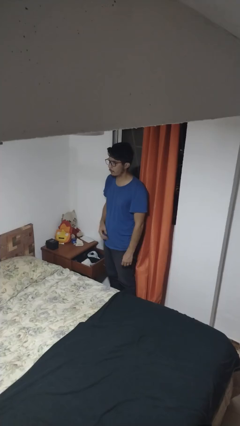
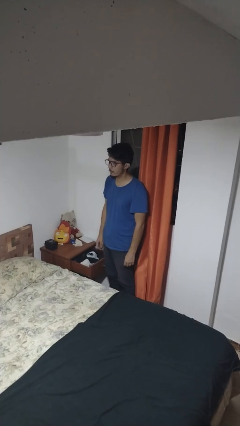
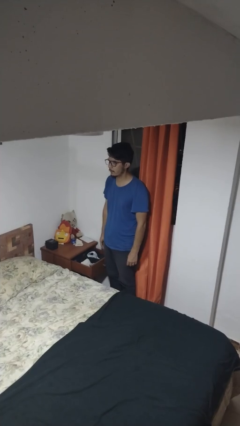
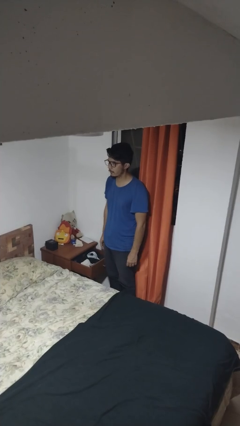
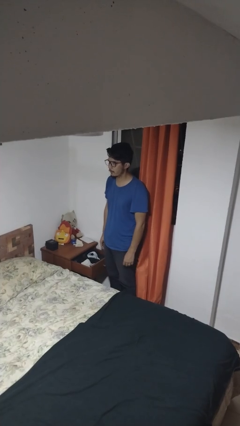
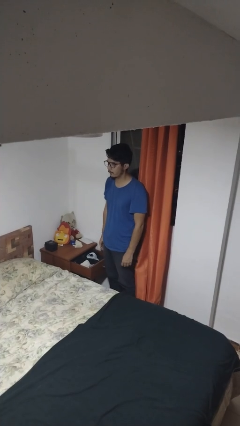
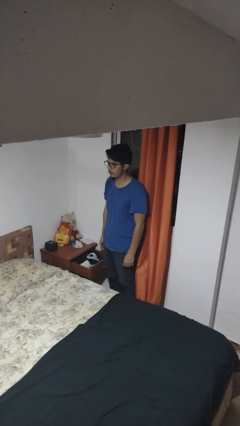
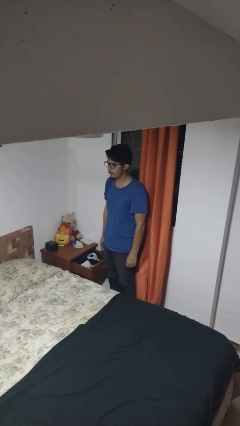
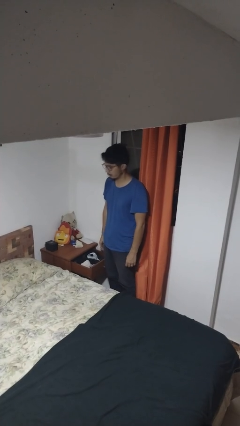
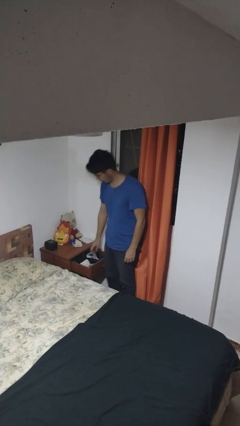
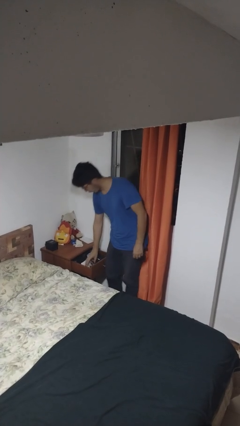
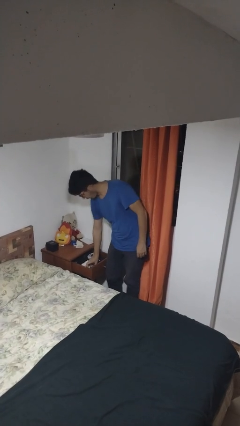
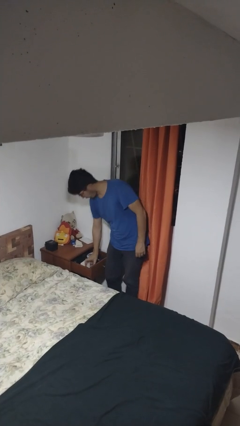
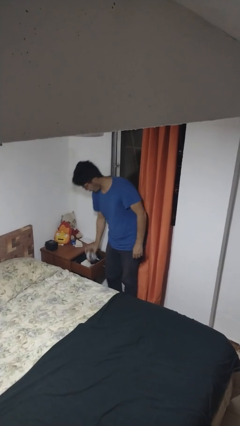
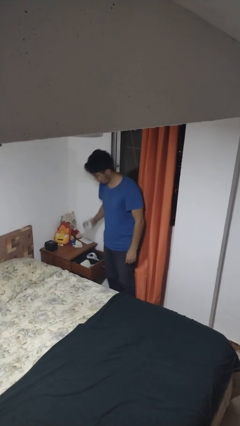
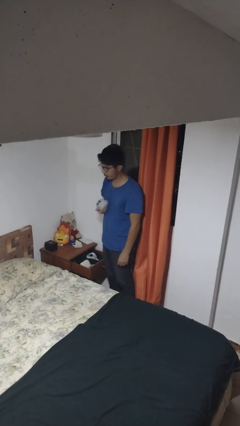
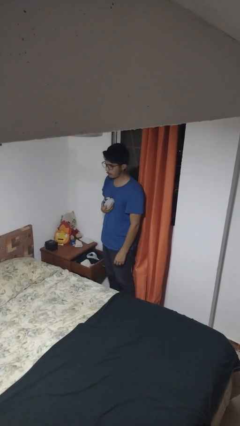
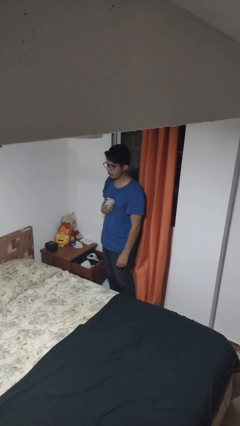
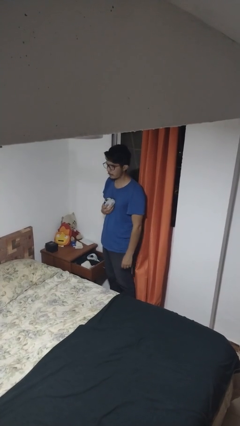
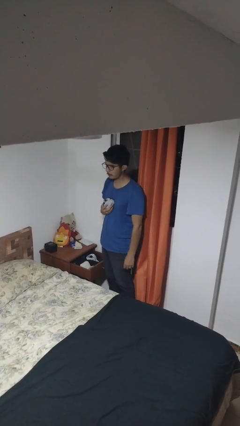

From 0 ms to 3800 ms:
person takes clothes from dresser

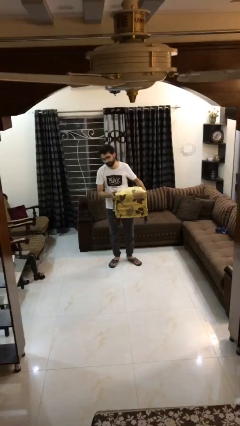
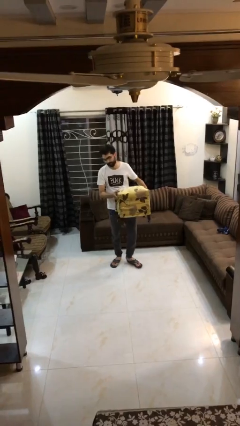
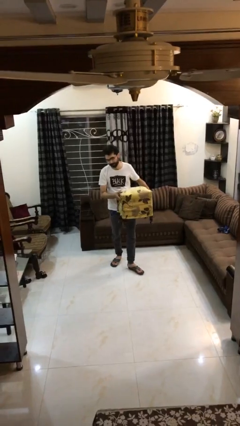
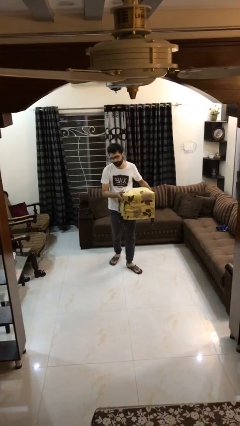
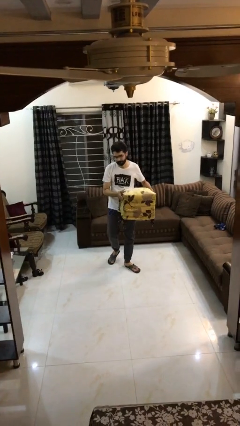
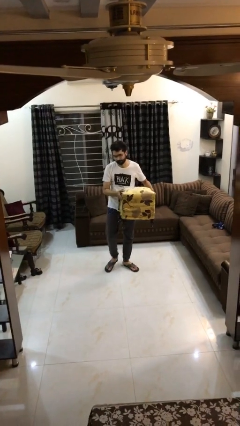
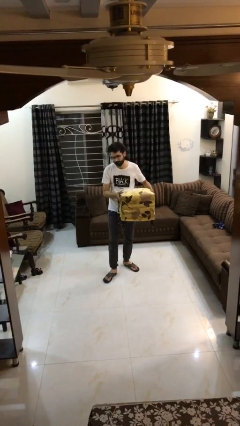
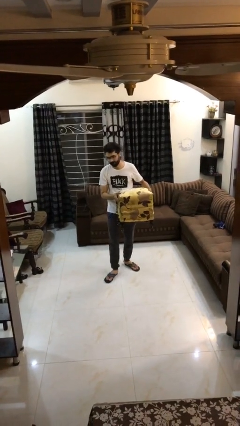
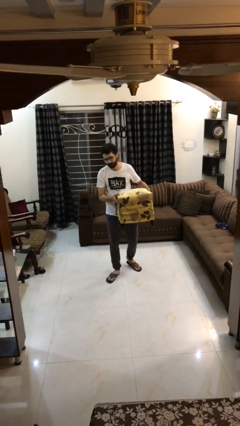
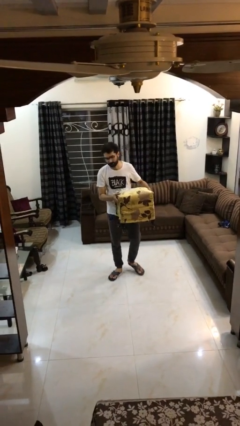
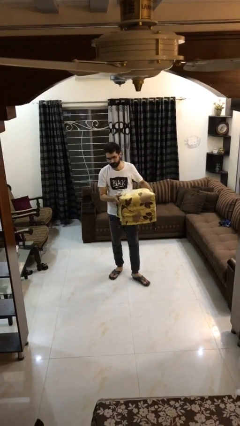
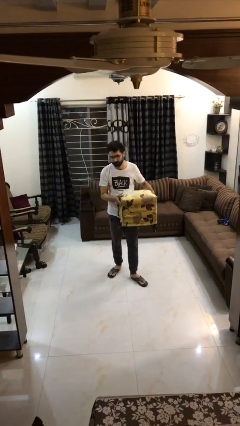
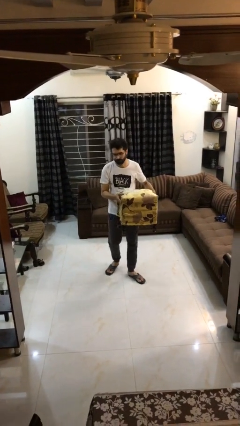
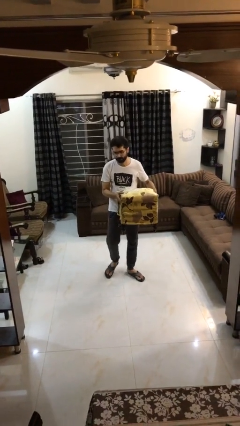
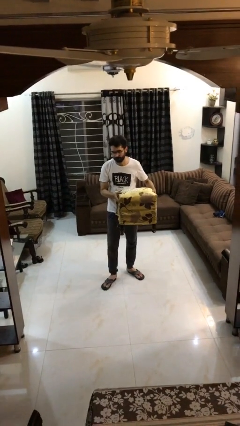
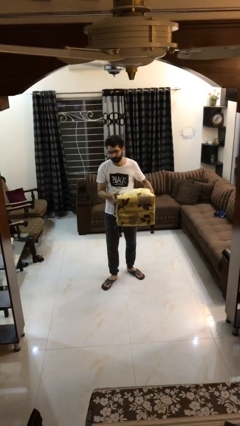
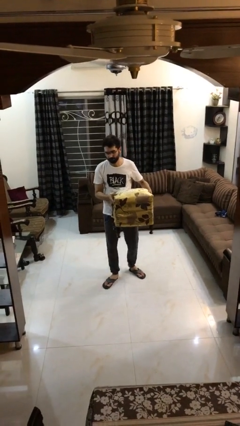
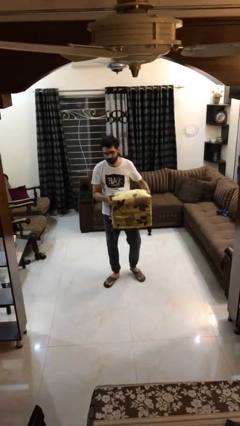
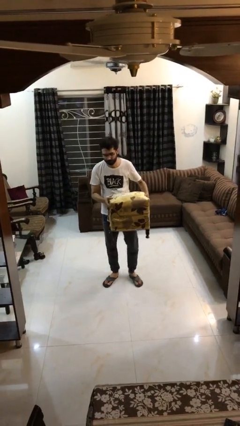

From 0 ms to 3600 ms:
person carries heavy object

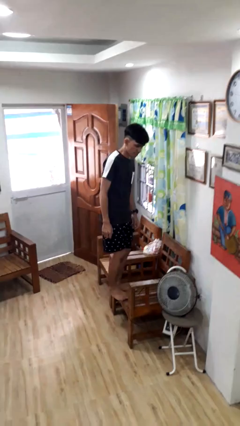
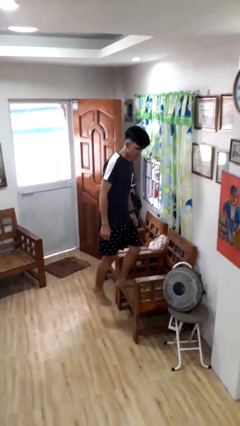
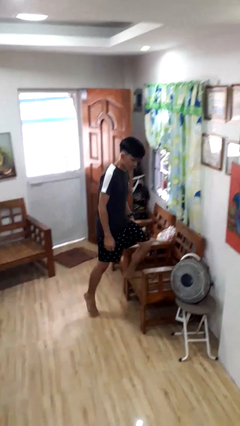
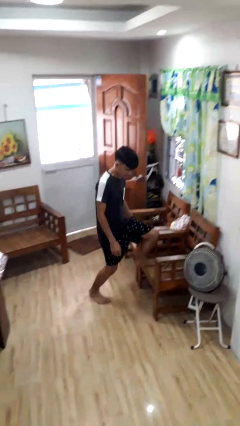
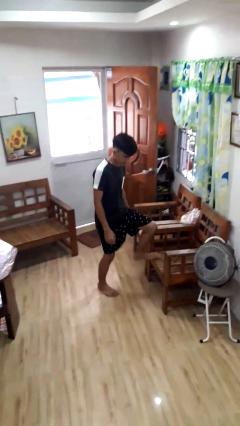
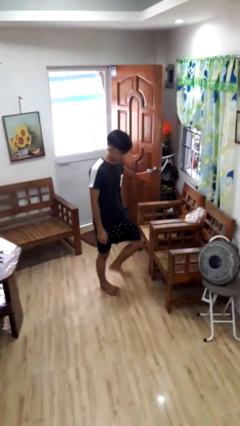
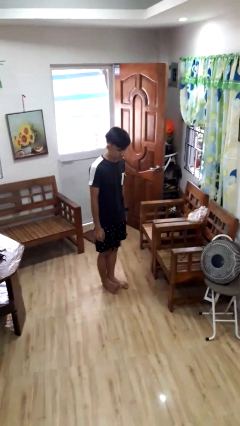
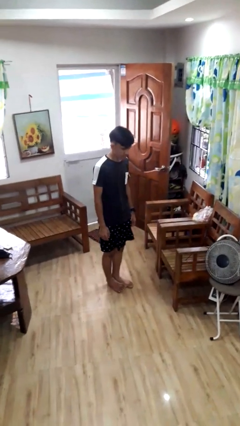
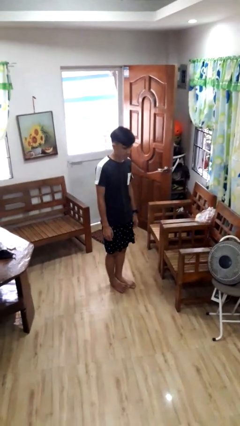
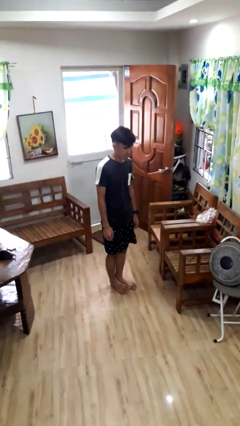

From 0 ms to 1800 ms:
person climbs off chair

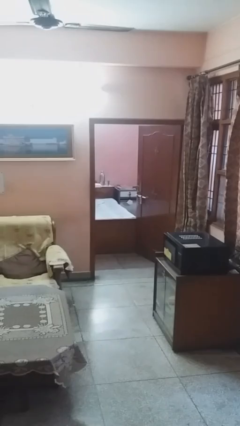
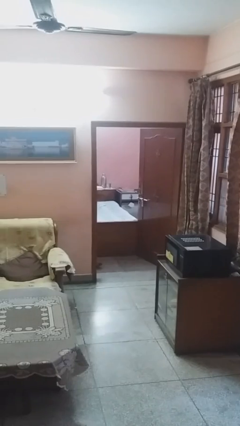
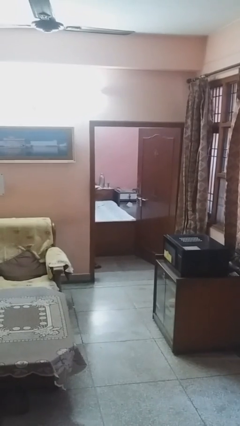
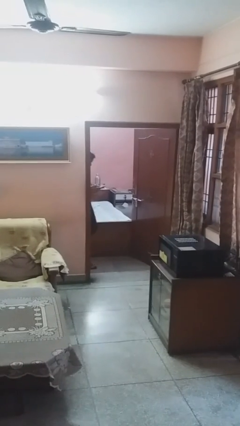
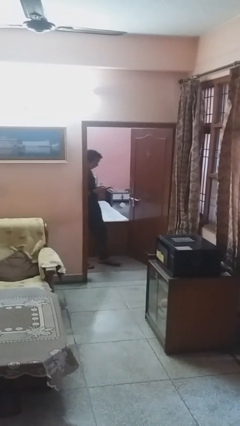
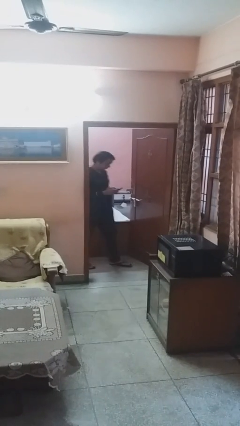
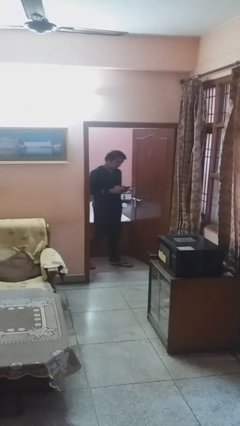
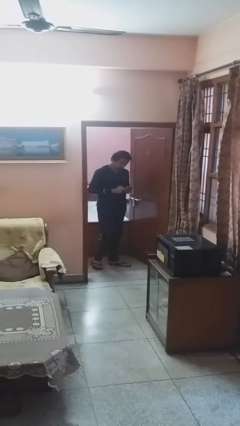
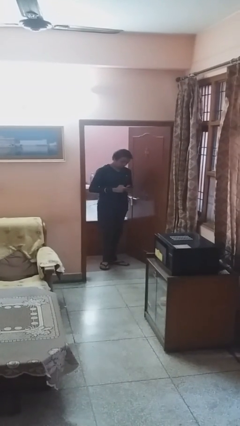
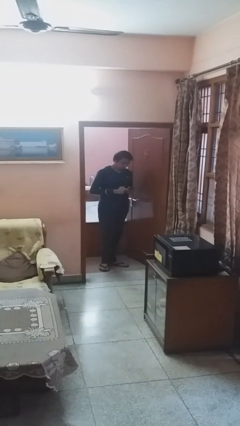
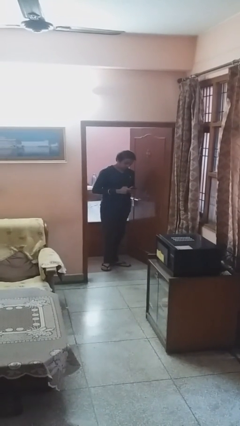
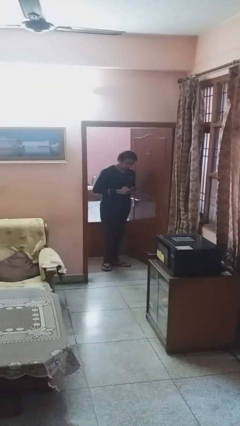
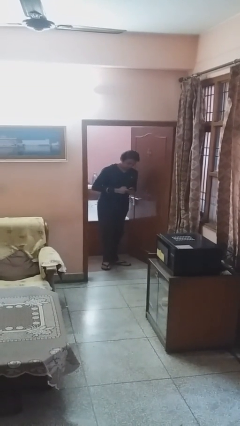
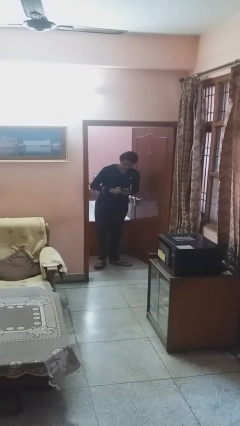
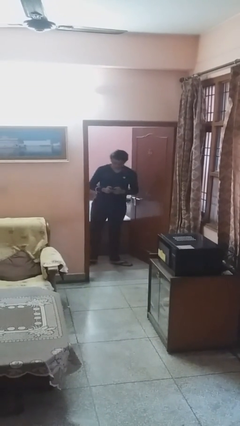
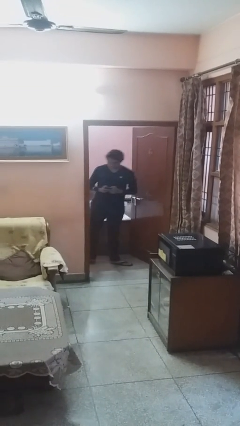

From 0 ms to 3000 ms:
person enters scene through structure

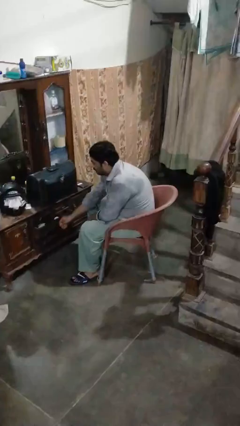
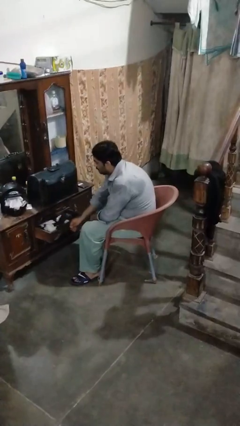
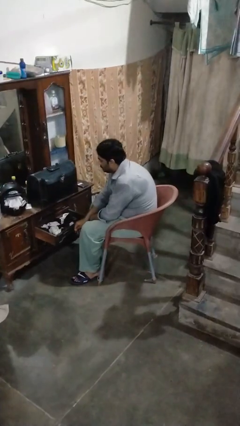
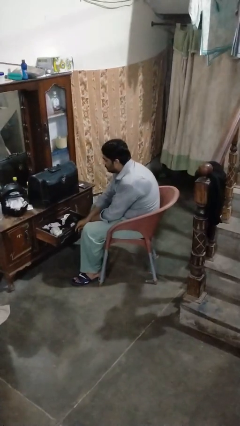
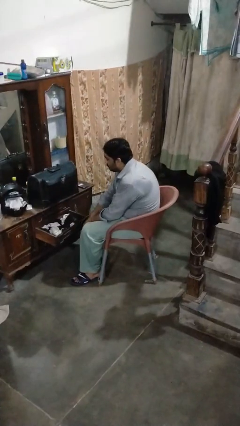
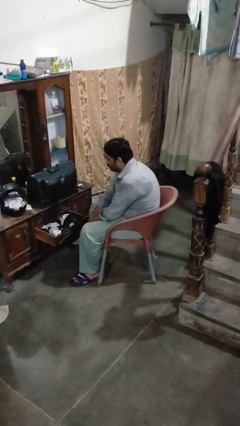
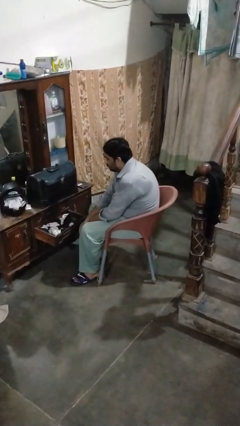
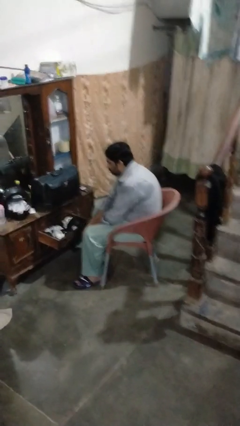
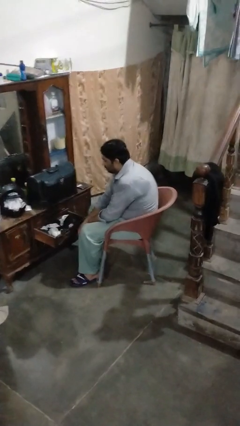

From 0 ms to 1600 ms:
person opens dresser drawer

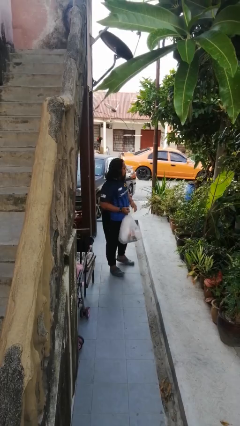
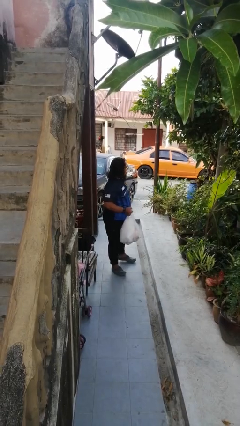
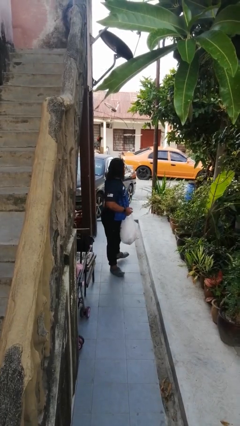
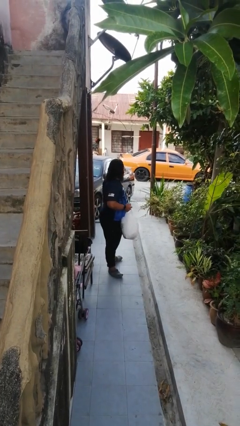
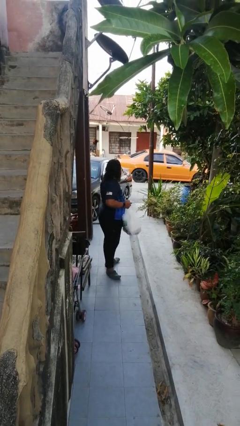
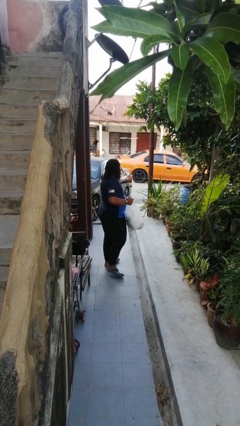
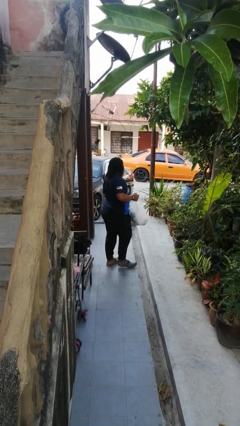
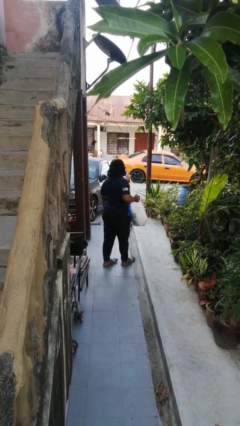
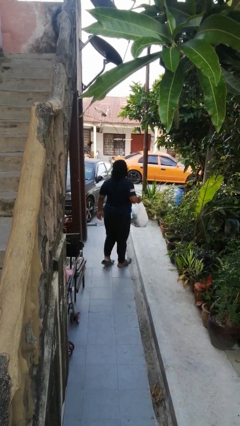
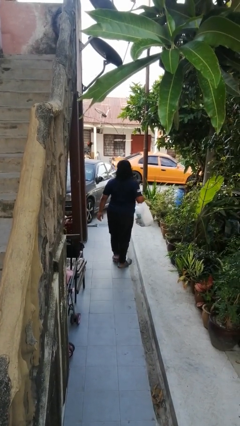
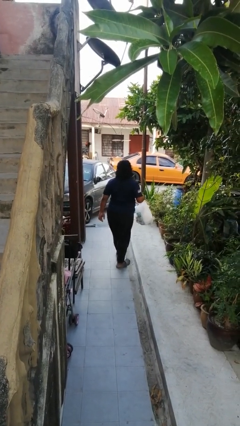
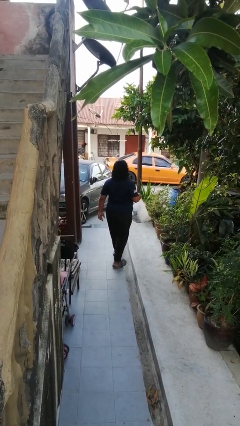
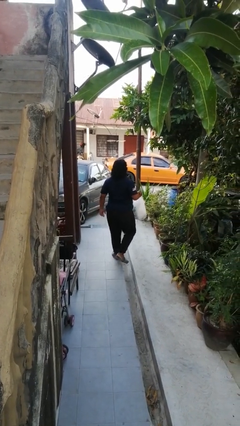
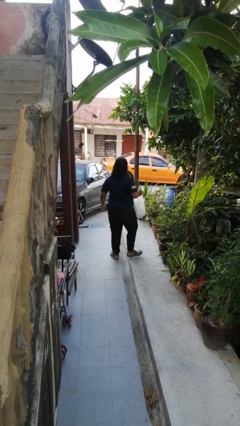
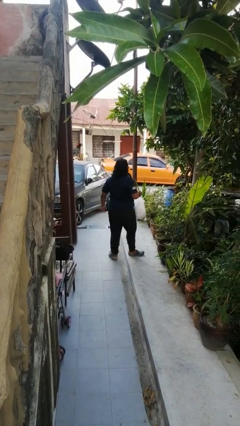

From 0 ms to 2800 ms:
person carries groceries

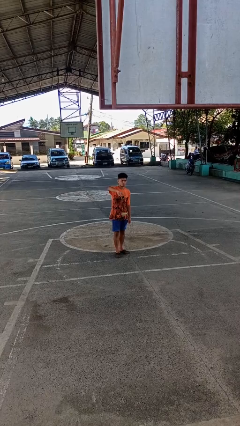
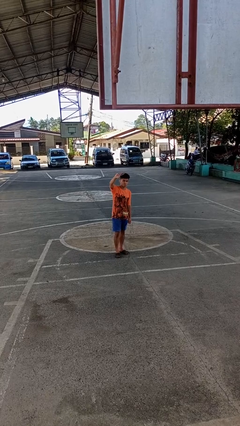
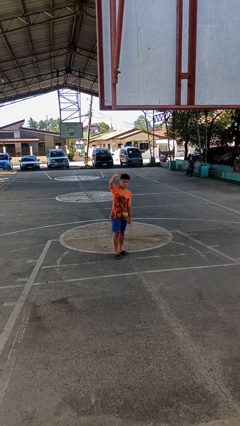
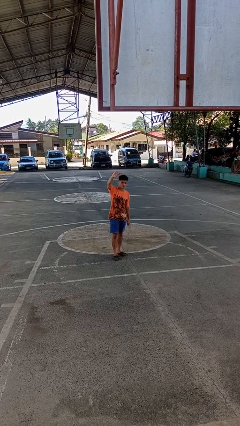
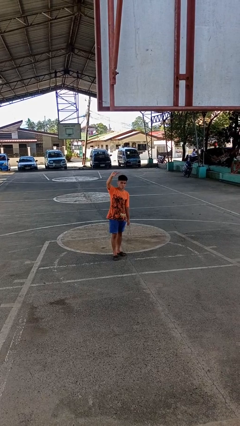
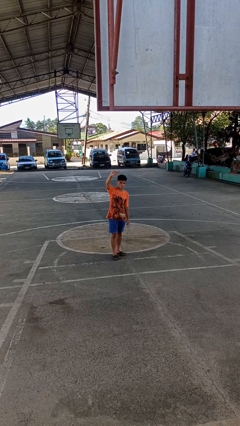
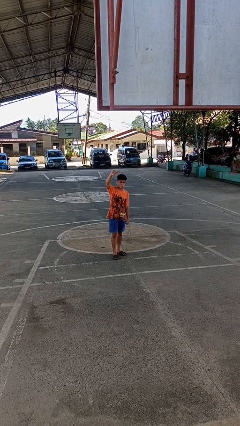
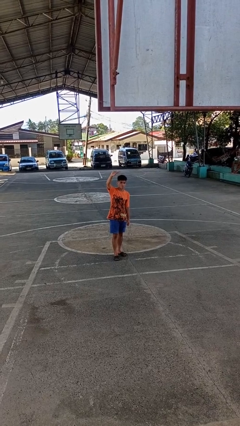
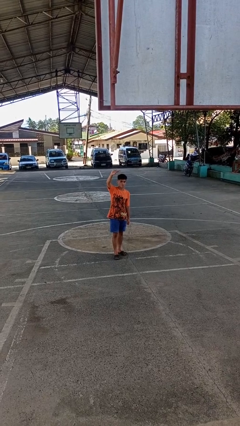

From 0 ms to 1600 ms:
person gestures swipe up
